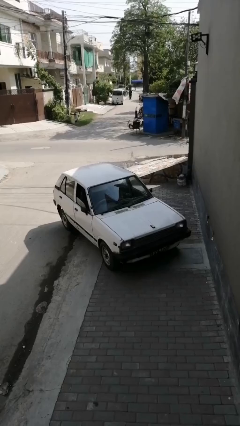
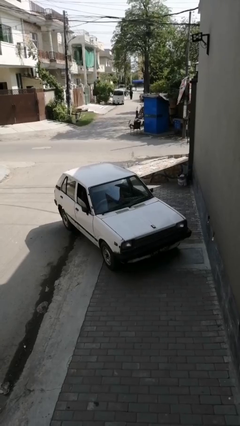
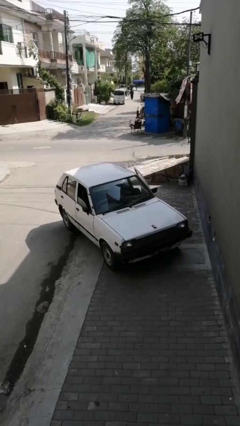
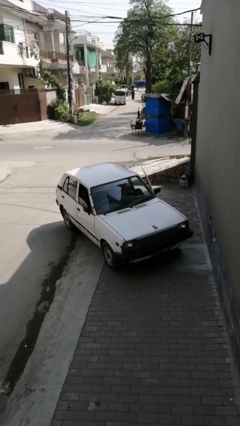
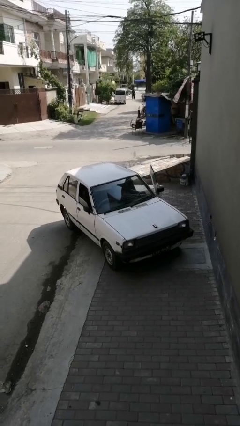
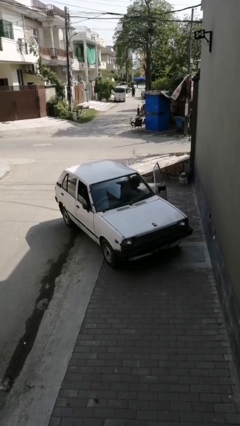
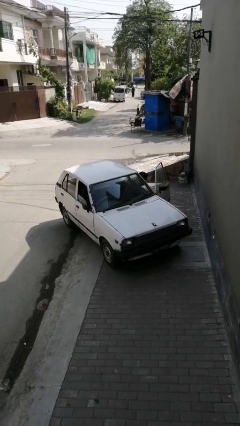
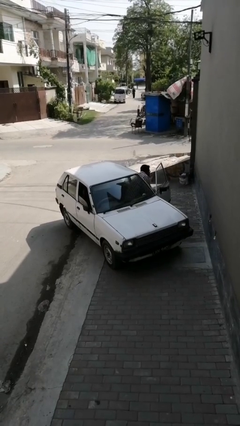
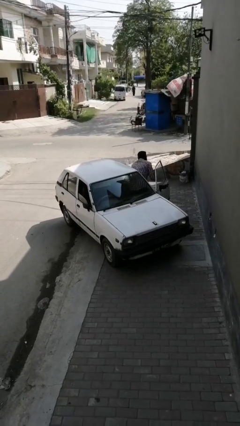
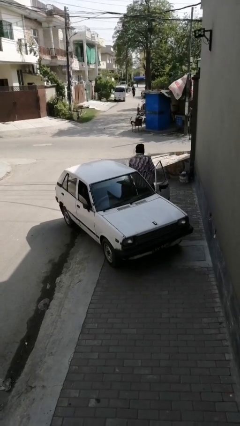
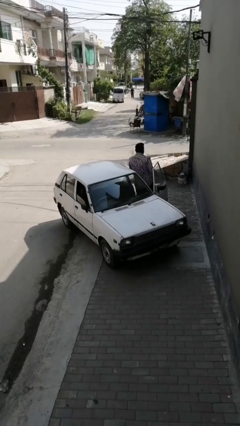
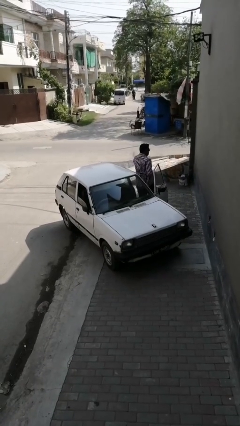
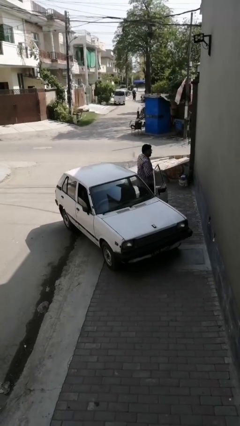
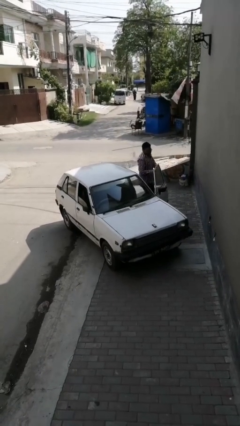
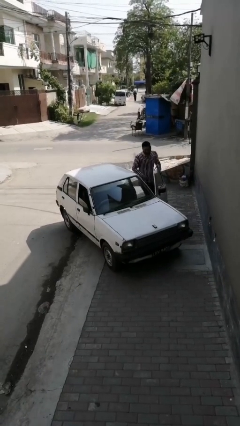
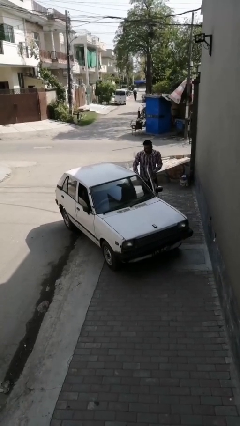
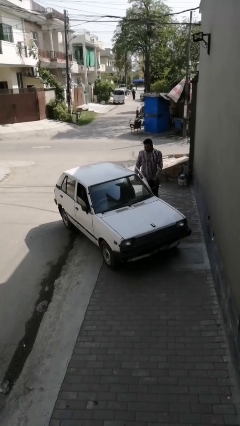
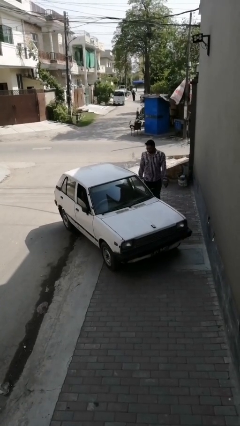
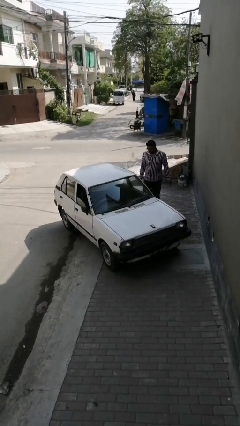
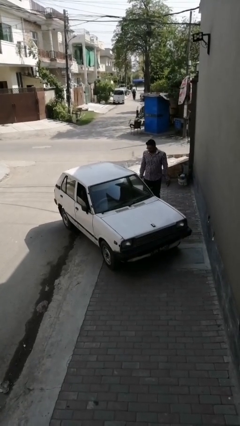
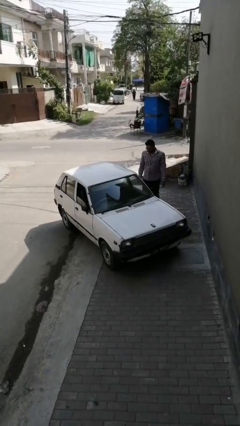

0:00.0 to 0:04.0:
car drops off person

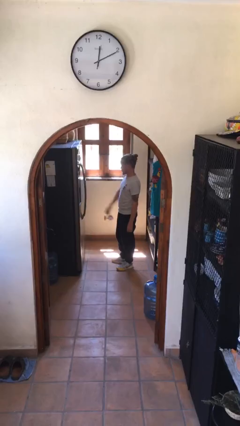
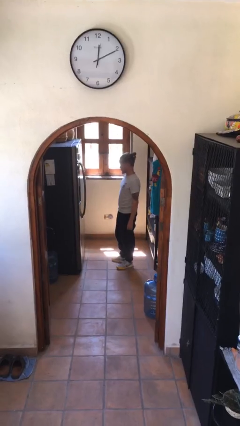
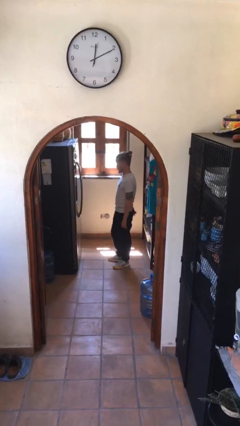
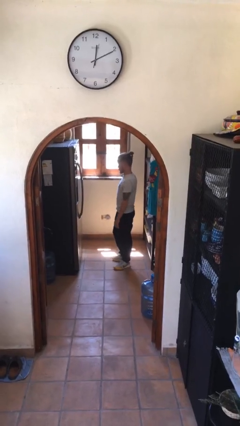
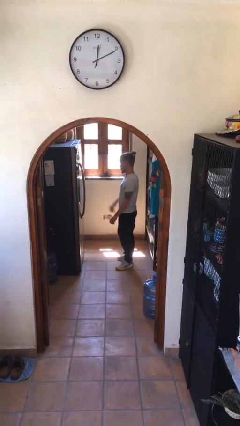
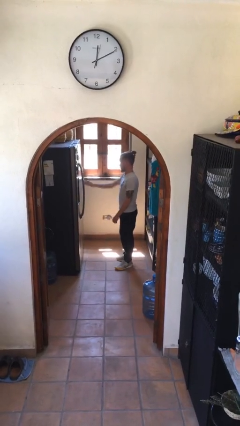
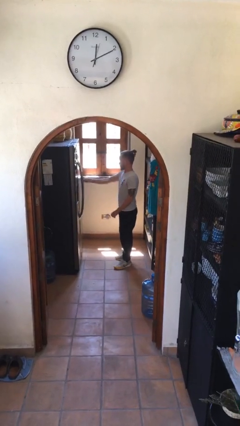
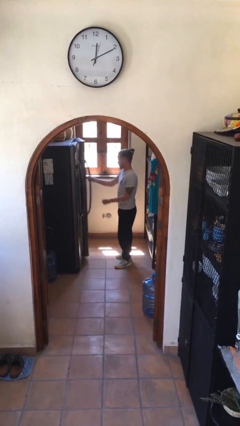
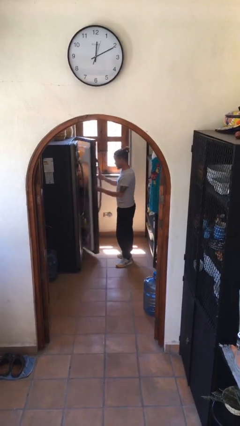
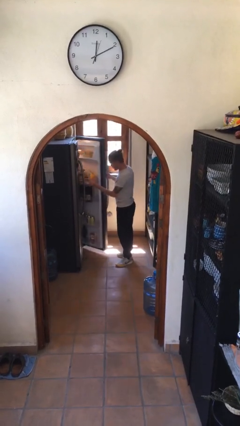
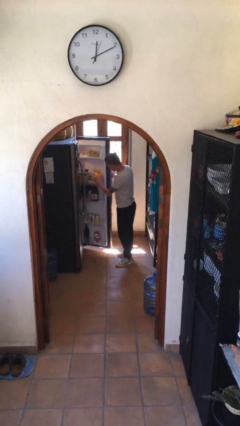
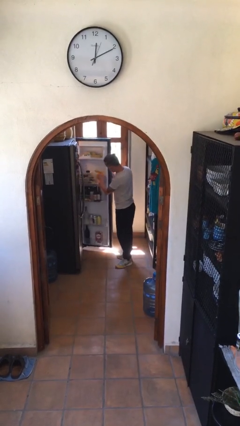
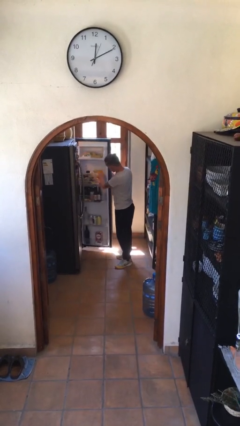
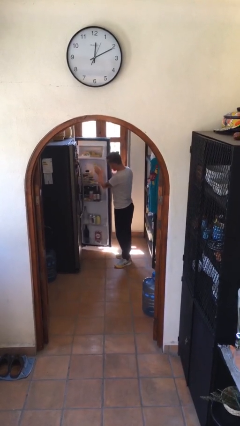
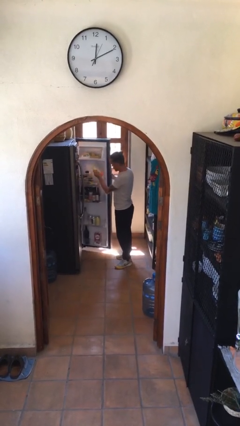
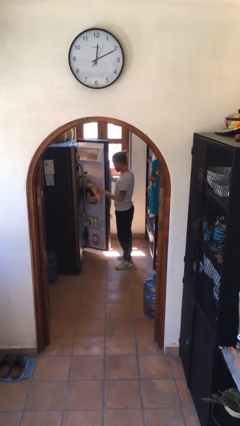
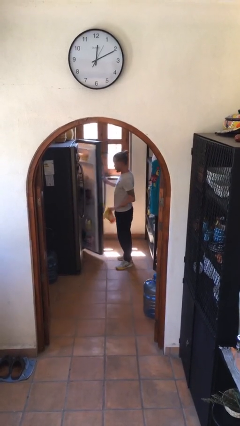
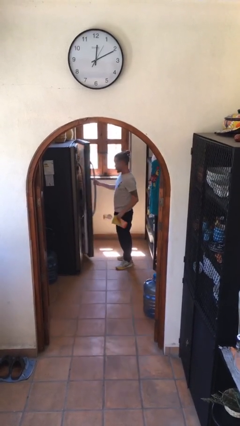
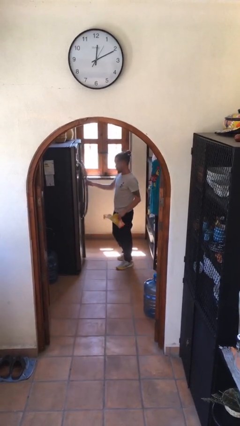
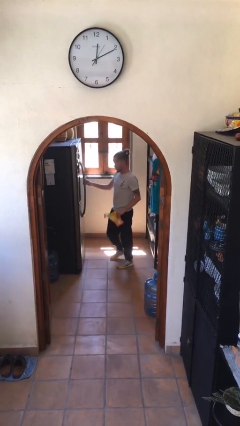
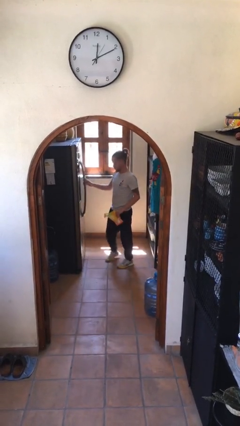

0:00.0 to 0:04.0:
person takes object from refrigerator

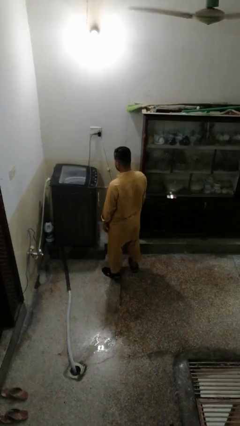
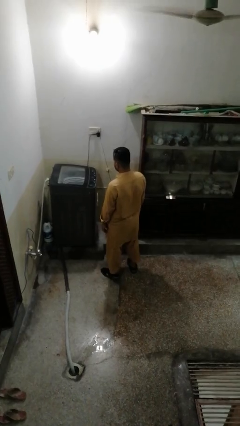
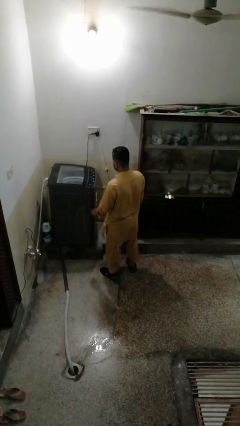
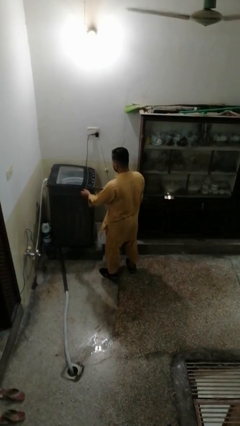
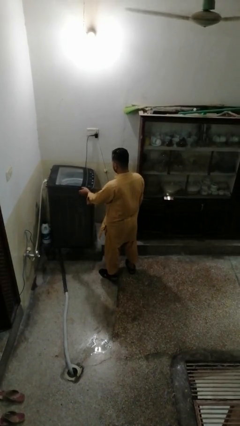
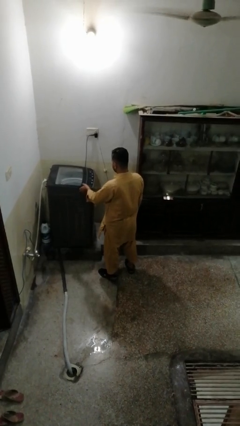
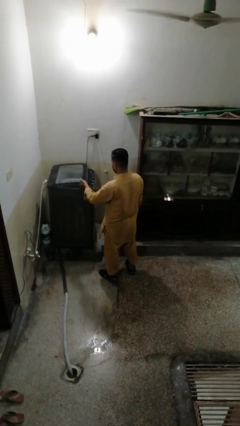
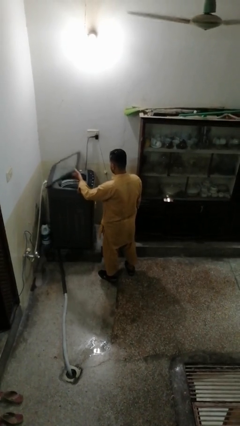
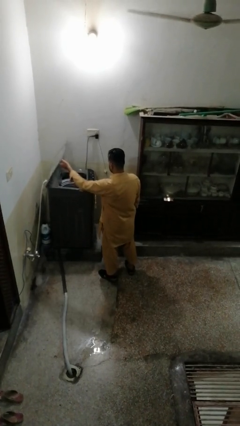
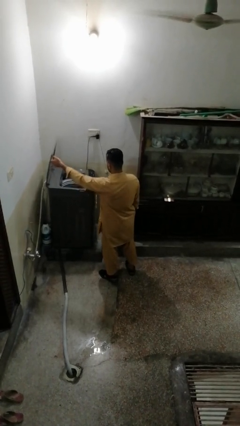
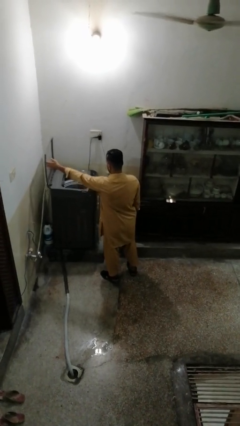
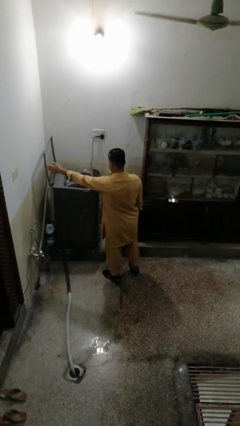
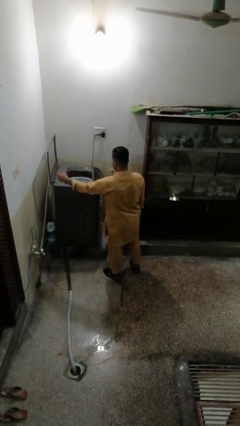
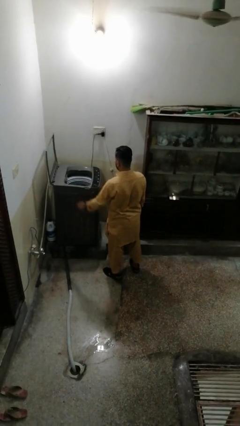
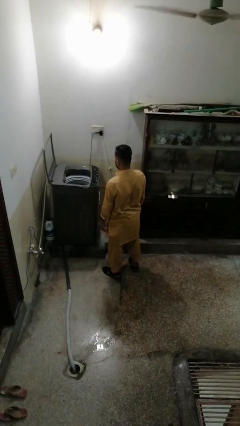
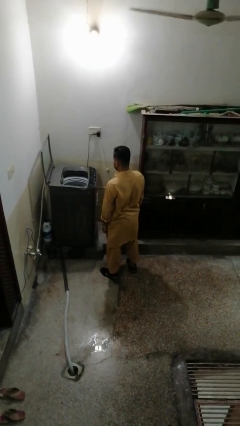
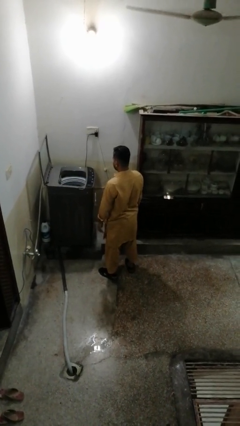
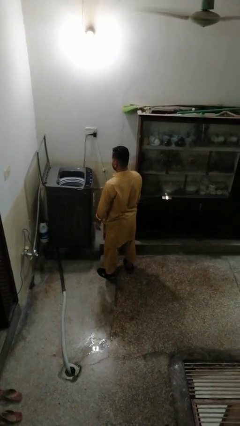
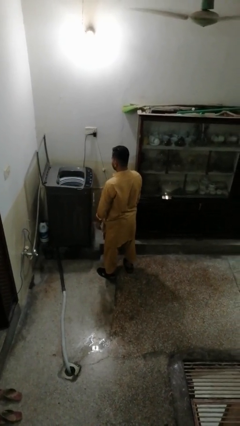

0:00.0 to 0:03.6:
person opens clothes washer

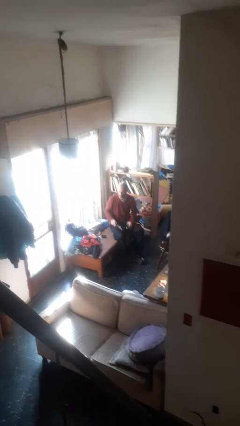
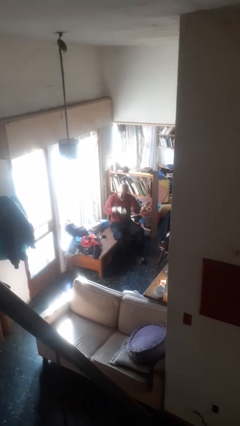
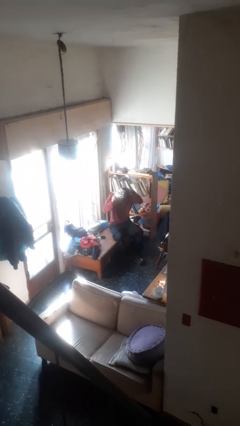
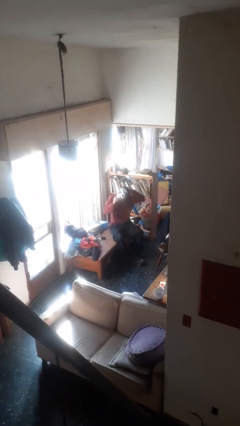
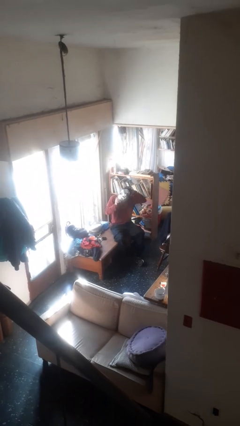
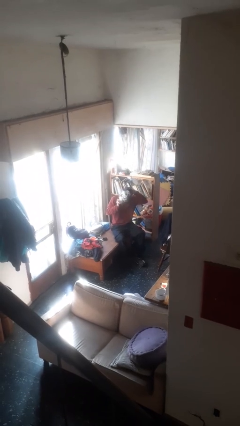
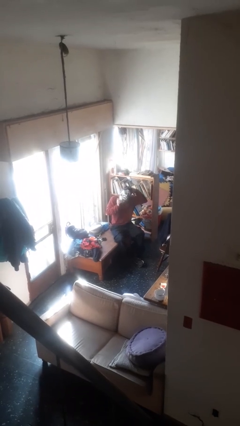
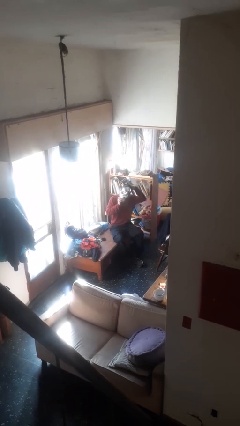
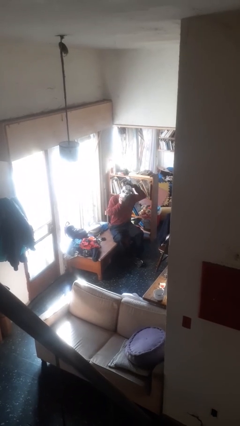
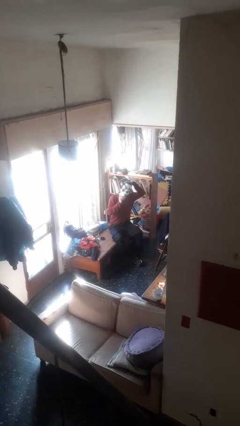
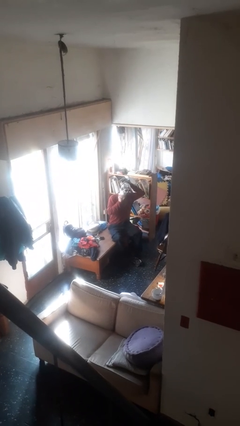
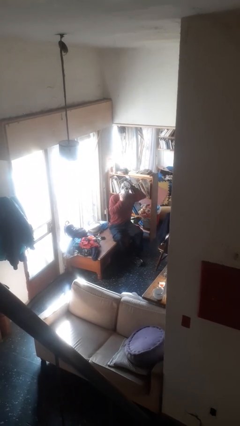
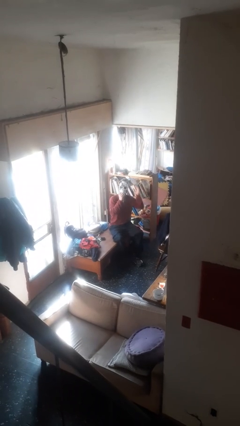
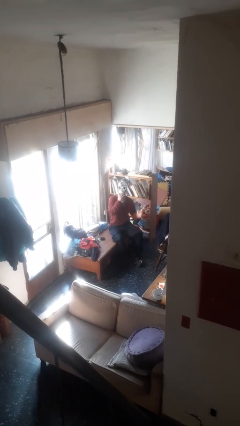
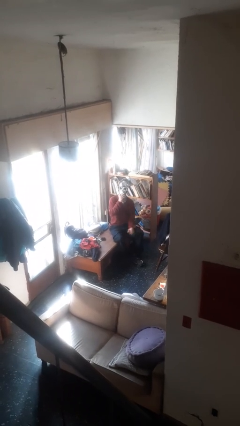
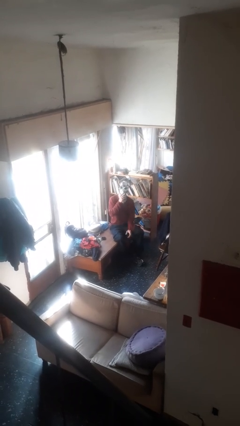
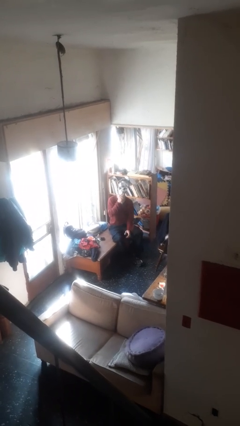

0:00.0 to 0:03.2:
person puts on facemask

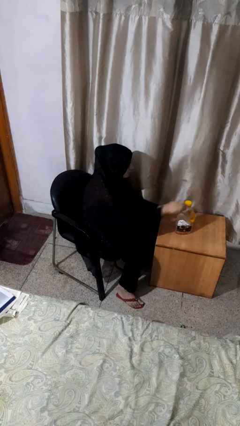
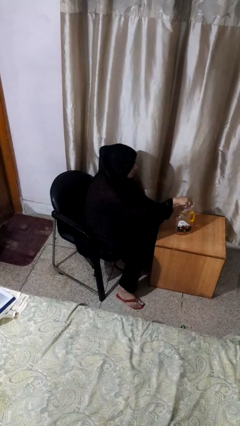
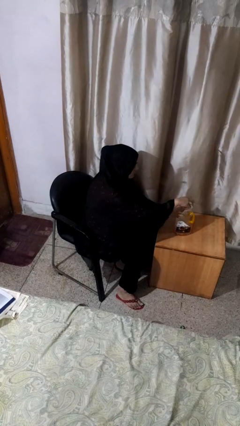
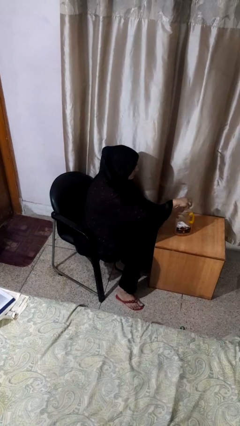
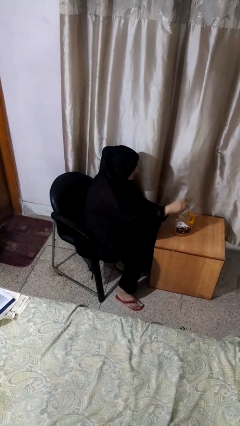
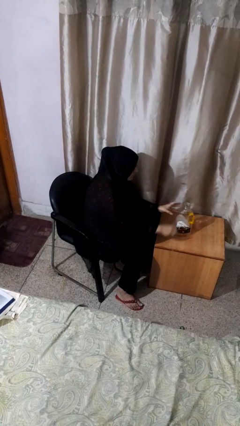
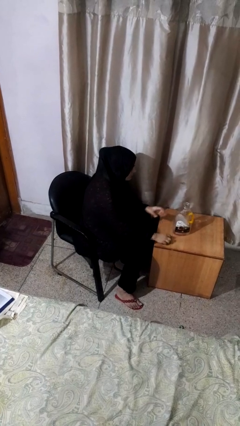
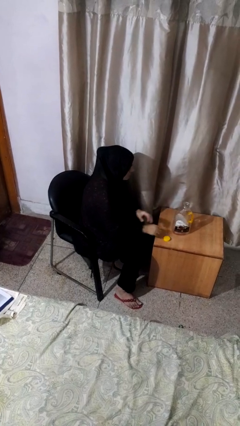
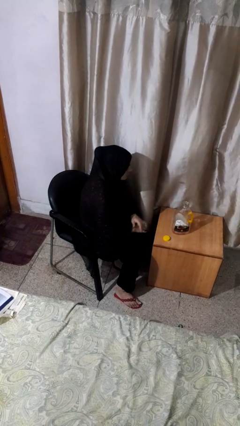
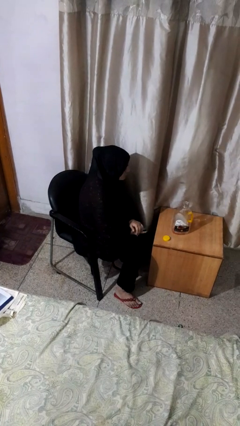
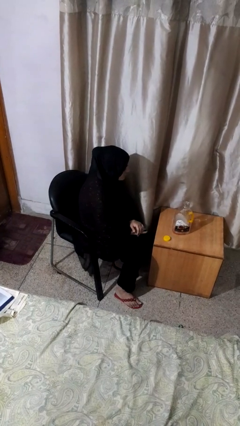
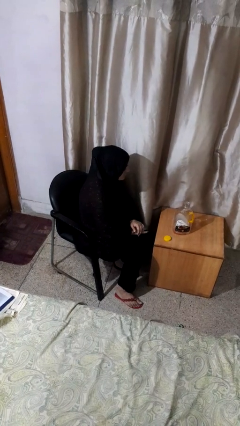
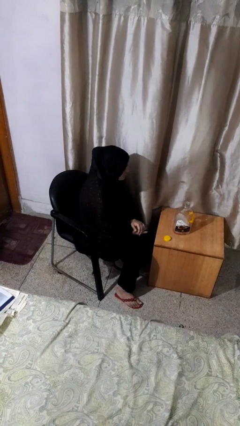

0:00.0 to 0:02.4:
person unscrews lid from bottle
